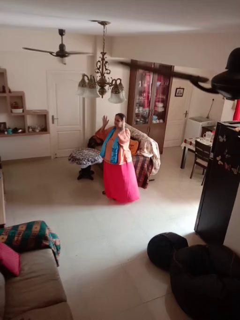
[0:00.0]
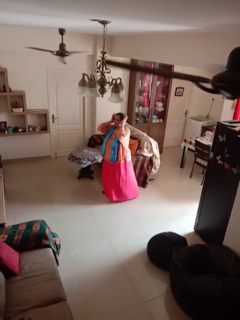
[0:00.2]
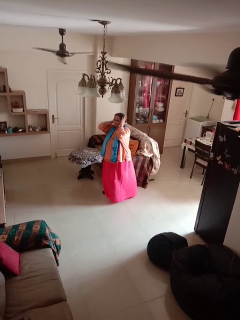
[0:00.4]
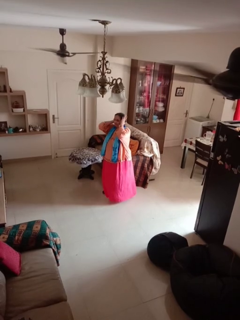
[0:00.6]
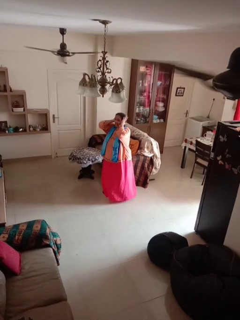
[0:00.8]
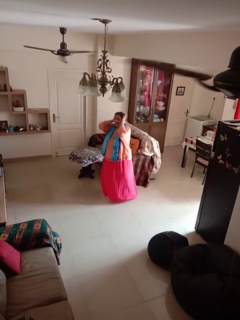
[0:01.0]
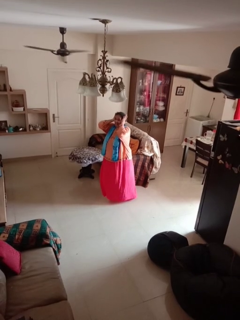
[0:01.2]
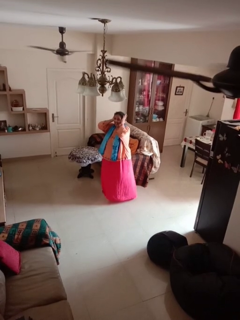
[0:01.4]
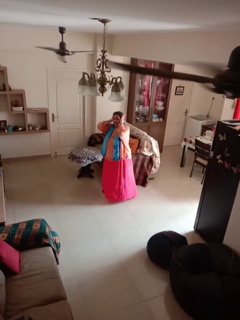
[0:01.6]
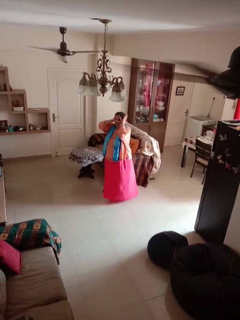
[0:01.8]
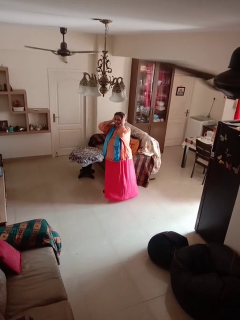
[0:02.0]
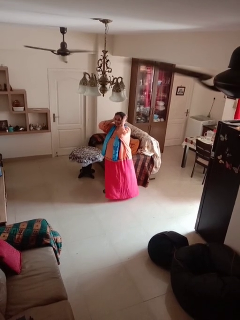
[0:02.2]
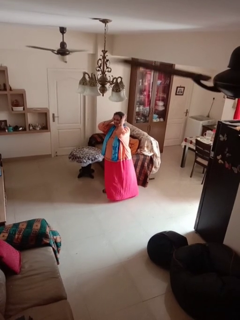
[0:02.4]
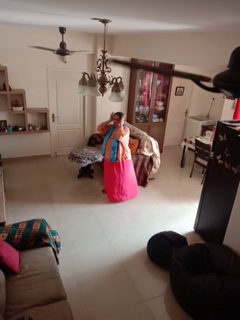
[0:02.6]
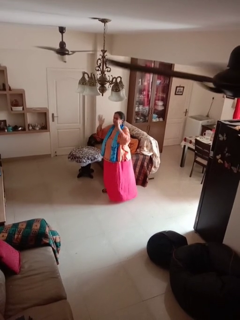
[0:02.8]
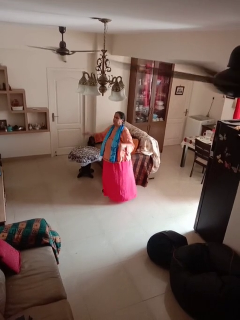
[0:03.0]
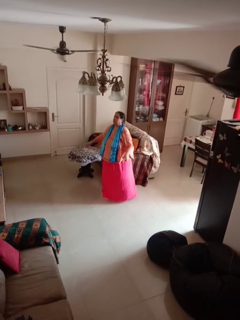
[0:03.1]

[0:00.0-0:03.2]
person puts fingers in ear

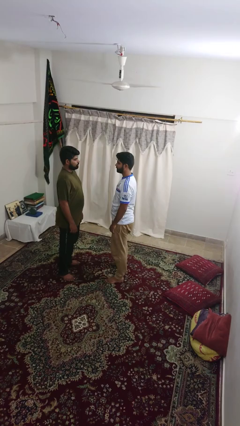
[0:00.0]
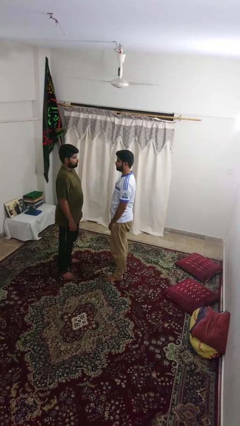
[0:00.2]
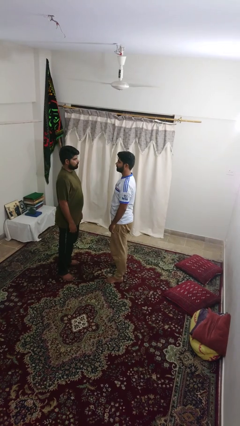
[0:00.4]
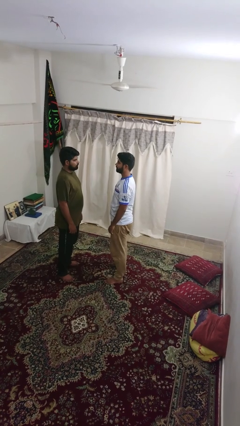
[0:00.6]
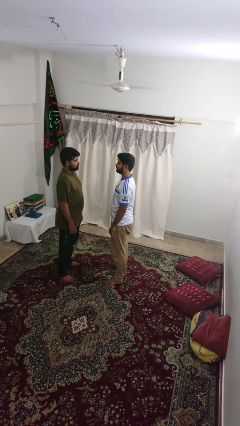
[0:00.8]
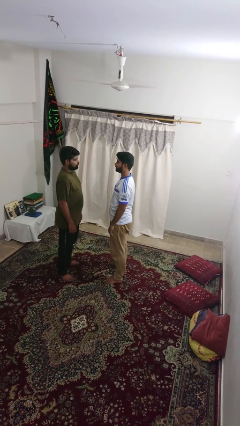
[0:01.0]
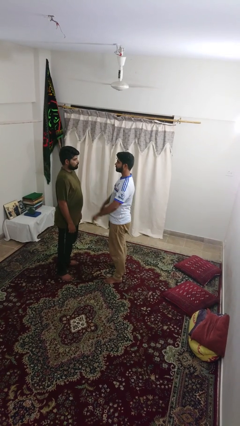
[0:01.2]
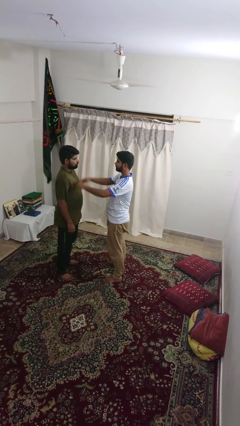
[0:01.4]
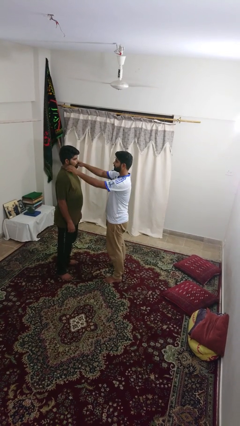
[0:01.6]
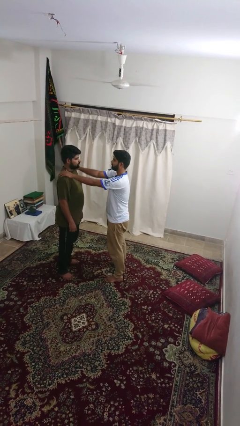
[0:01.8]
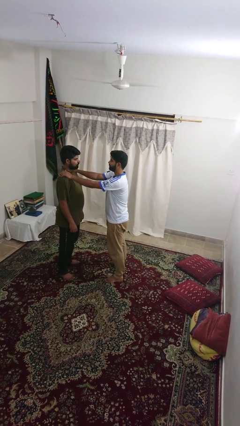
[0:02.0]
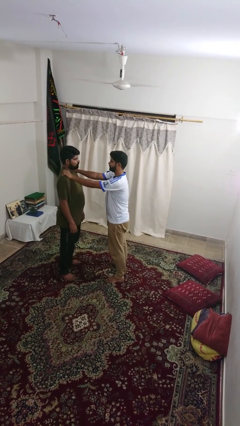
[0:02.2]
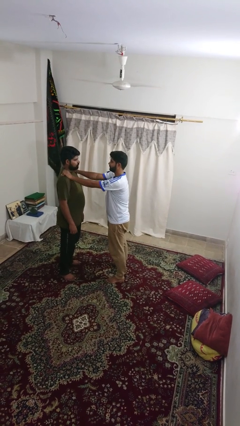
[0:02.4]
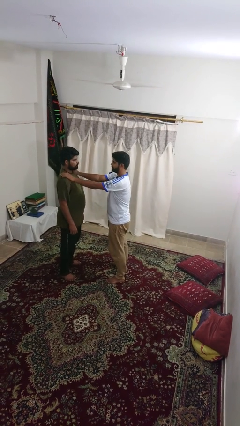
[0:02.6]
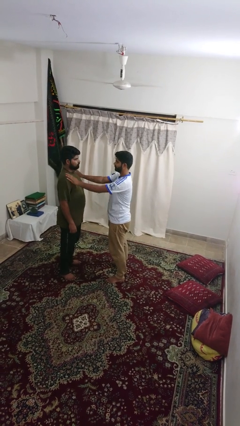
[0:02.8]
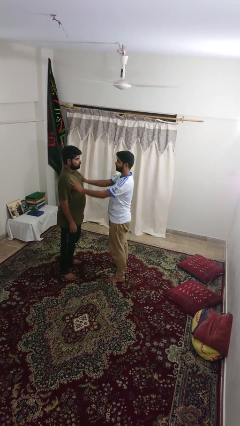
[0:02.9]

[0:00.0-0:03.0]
person pounds shoulders of person

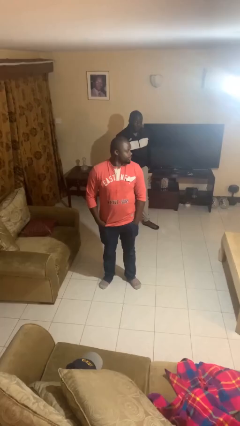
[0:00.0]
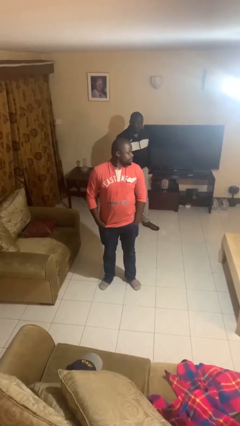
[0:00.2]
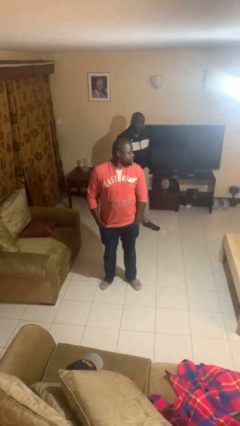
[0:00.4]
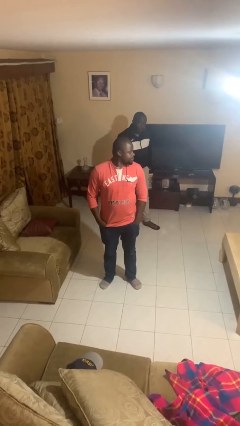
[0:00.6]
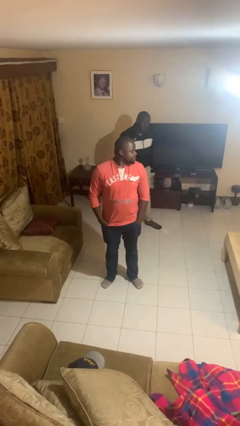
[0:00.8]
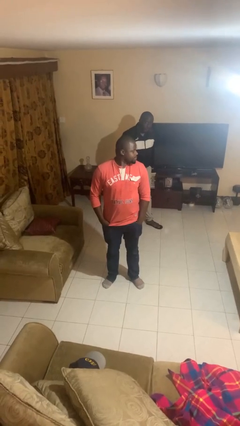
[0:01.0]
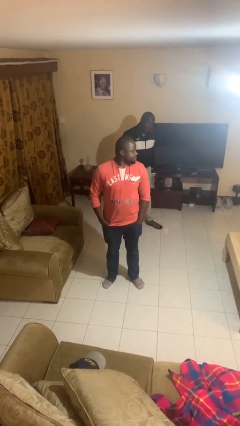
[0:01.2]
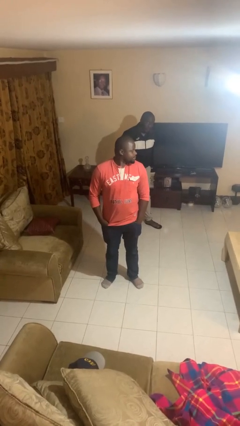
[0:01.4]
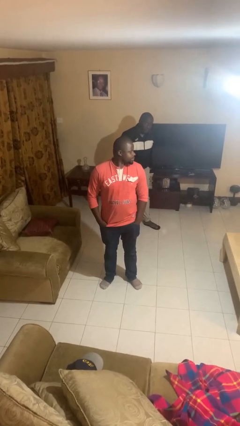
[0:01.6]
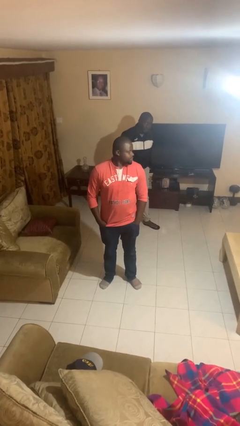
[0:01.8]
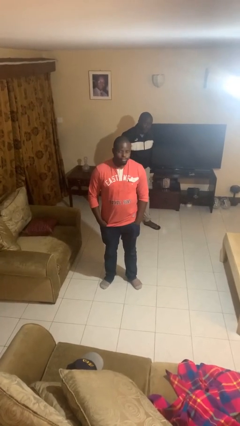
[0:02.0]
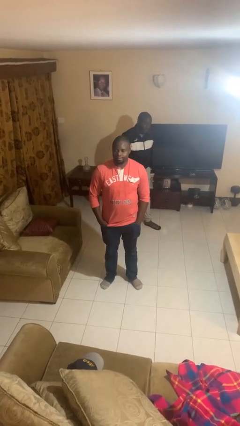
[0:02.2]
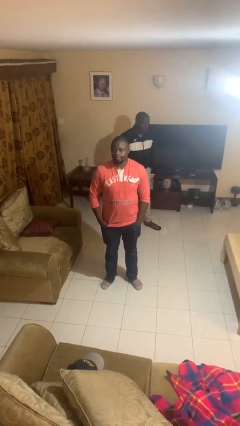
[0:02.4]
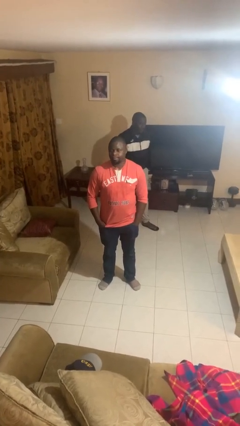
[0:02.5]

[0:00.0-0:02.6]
person looks over shoulder

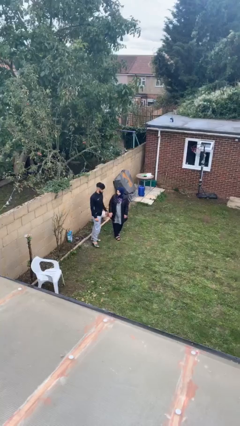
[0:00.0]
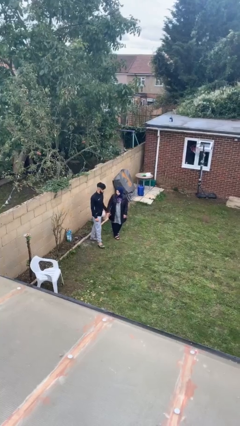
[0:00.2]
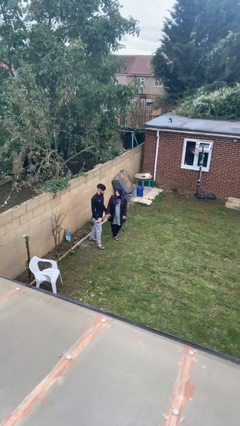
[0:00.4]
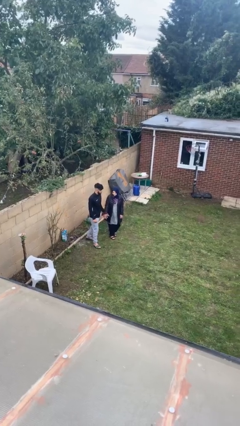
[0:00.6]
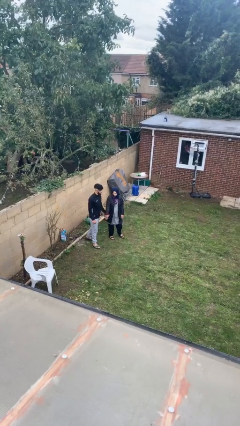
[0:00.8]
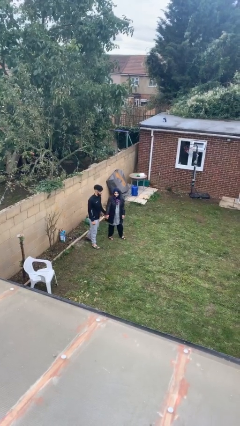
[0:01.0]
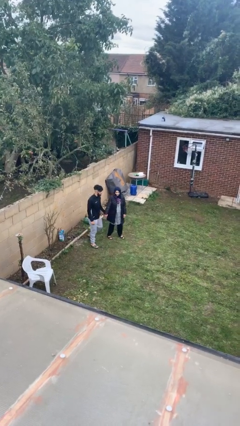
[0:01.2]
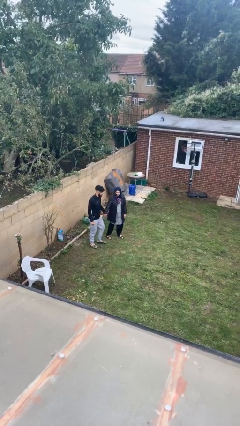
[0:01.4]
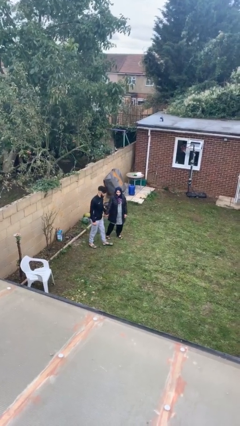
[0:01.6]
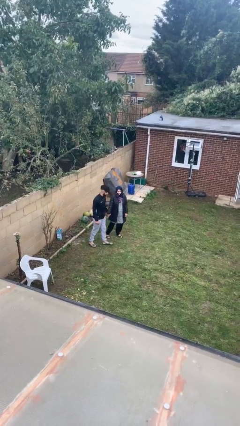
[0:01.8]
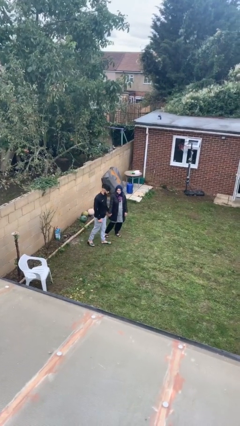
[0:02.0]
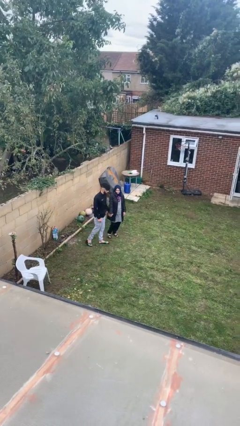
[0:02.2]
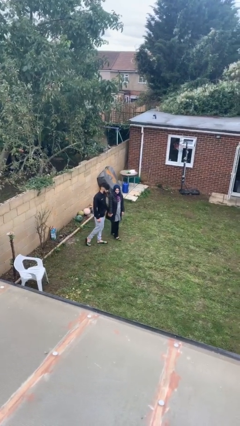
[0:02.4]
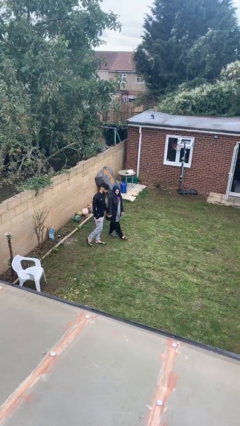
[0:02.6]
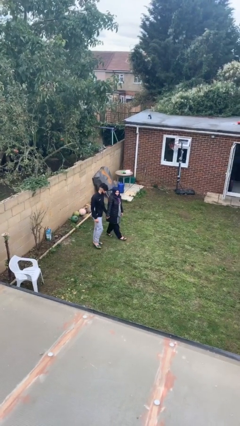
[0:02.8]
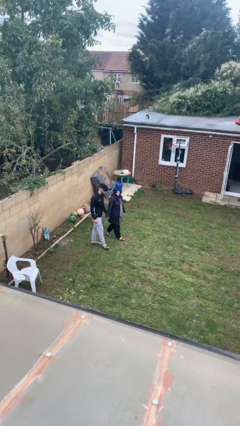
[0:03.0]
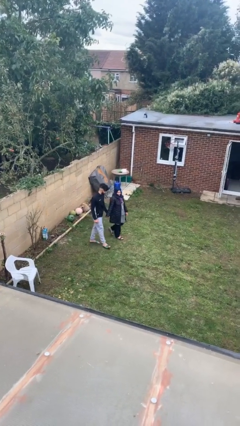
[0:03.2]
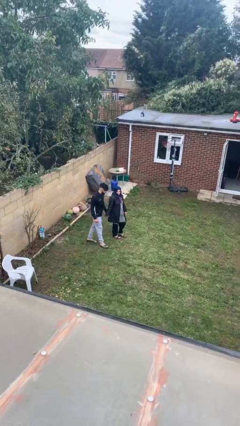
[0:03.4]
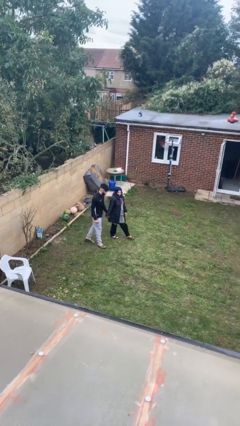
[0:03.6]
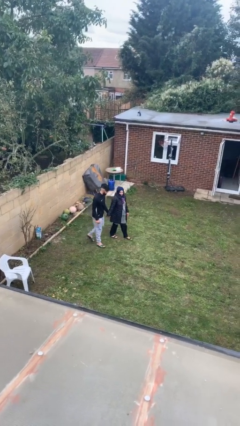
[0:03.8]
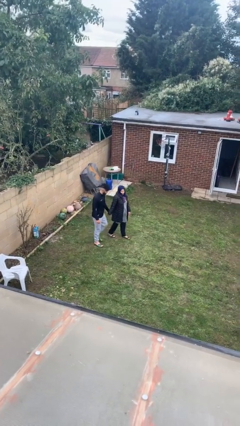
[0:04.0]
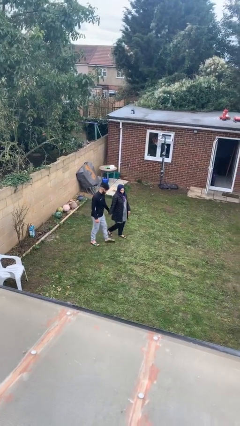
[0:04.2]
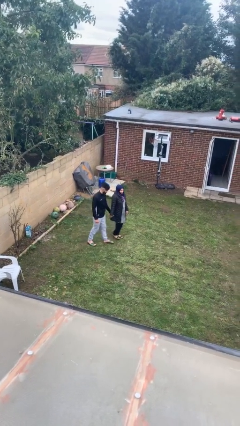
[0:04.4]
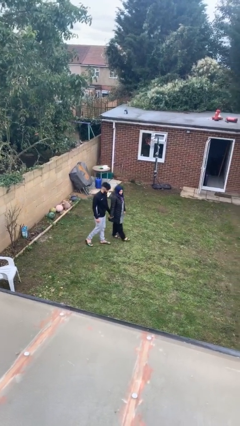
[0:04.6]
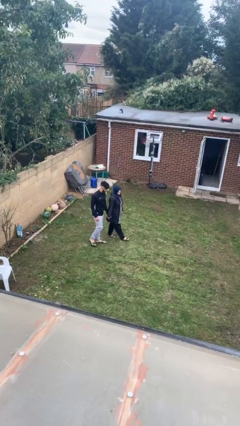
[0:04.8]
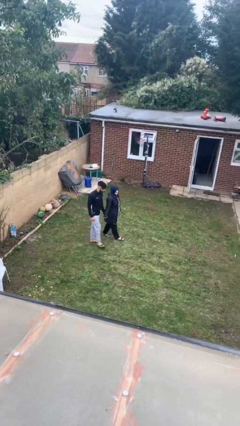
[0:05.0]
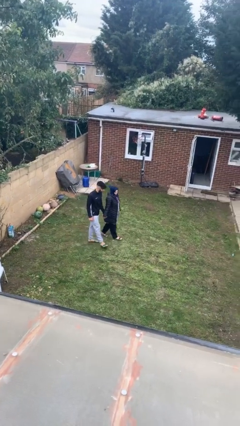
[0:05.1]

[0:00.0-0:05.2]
person holds hand

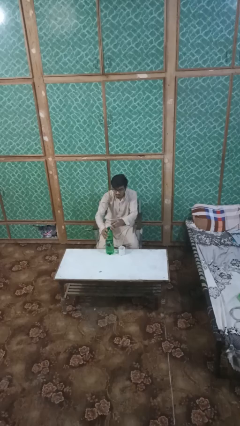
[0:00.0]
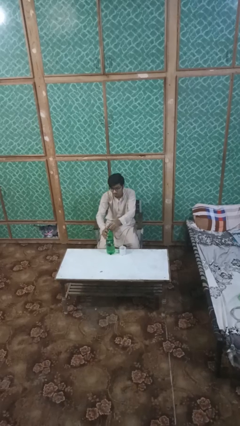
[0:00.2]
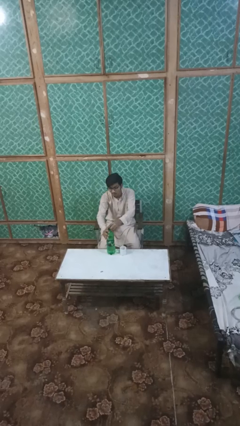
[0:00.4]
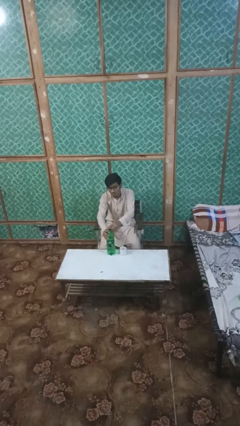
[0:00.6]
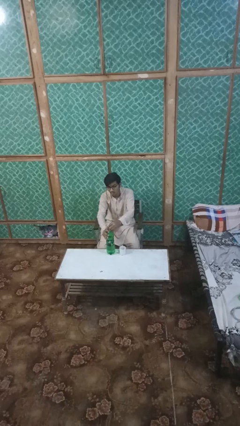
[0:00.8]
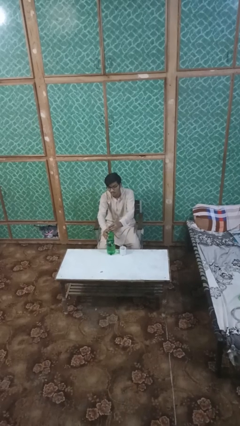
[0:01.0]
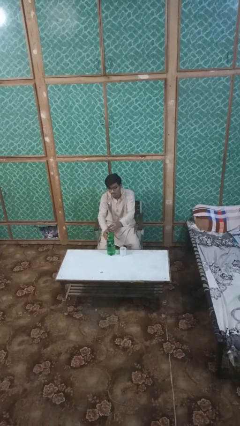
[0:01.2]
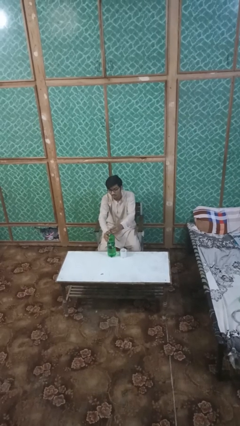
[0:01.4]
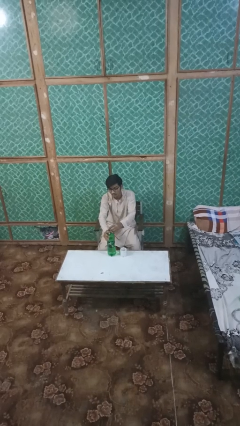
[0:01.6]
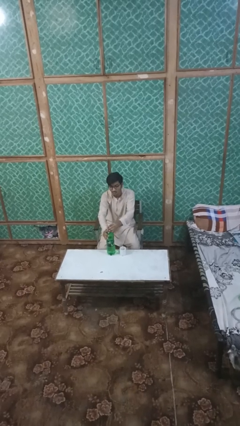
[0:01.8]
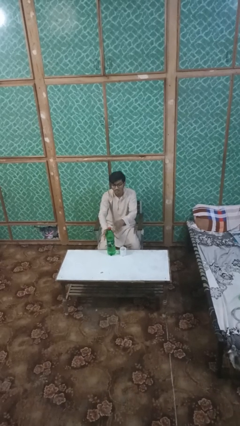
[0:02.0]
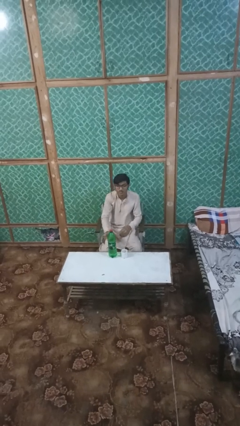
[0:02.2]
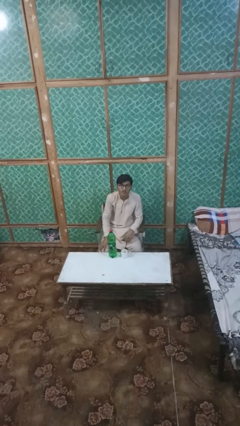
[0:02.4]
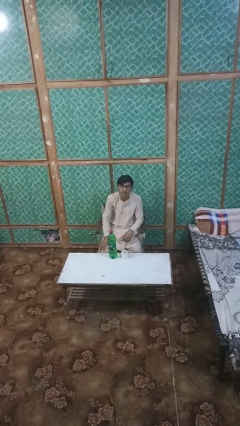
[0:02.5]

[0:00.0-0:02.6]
person screws lid to bottle

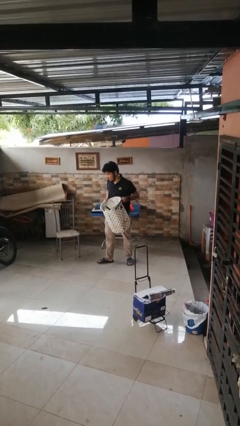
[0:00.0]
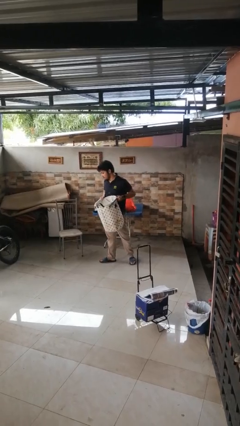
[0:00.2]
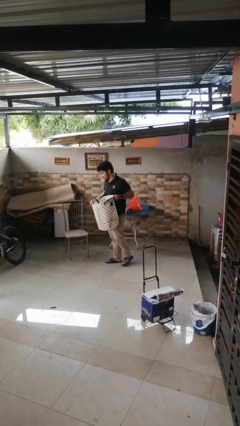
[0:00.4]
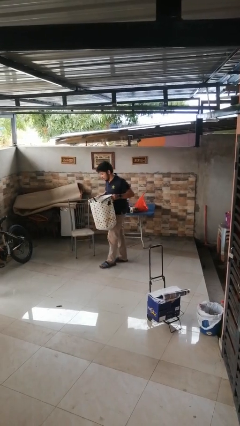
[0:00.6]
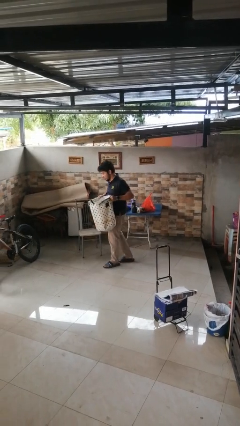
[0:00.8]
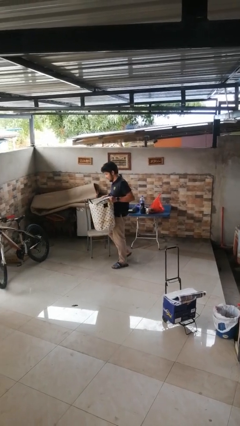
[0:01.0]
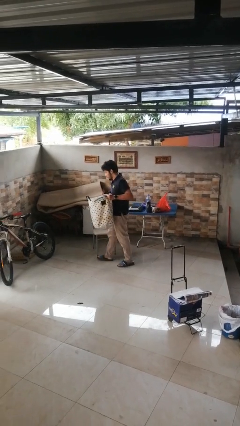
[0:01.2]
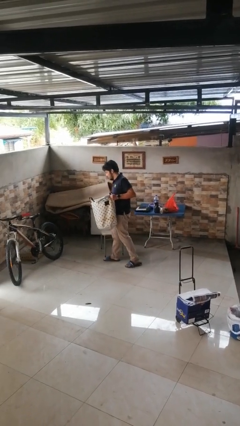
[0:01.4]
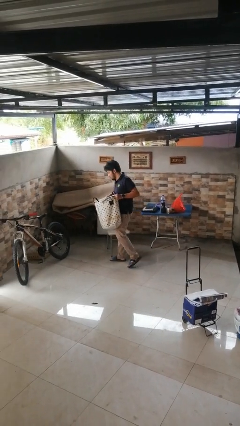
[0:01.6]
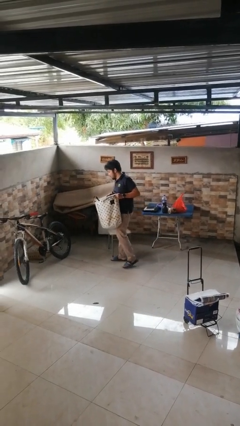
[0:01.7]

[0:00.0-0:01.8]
person carries laundry basket
